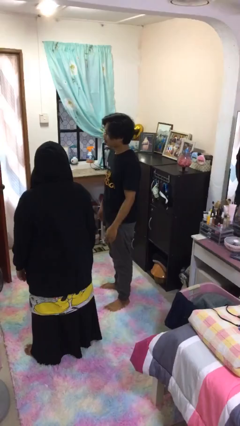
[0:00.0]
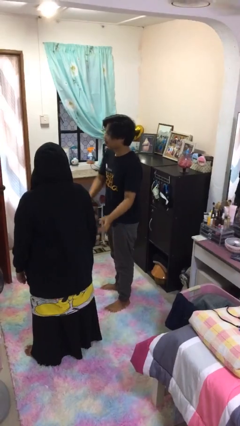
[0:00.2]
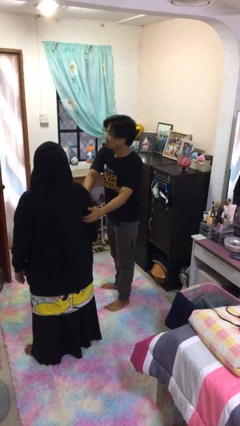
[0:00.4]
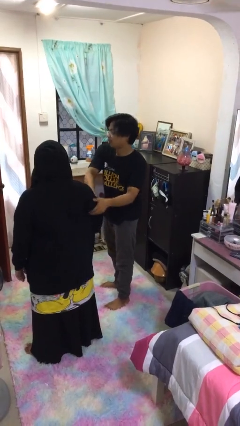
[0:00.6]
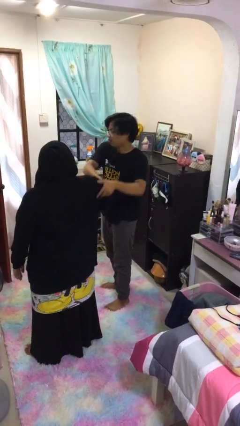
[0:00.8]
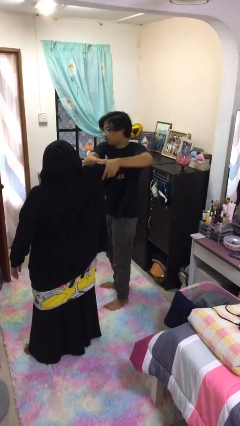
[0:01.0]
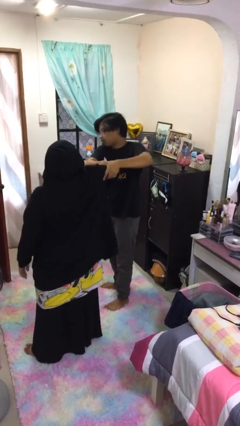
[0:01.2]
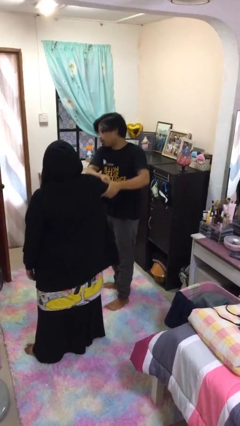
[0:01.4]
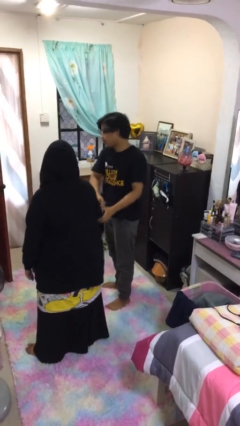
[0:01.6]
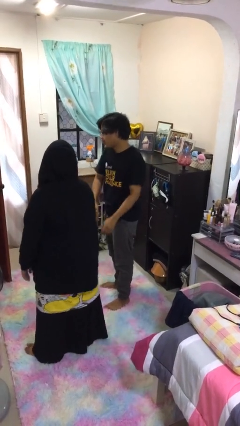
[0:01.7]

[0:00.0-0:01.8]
person grabs person by bicep

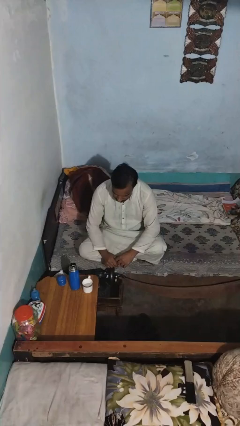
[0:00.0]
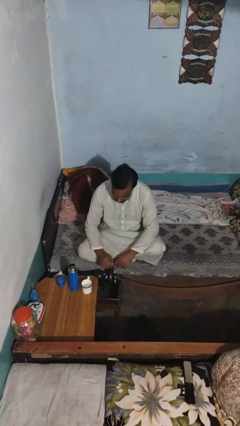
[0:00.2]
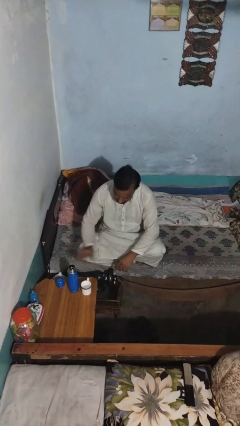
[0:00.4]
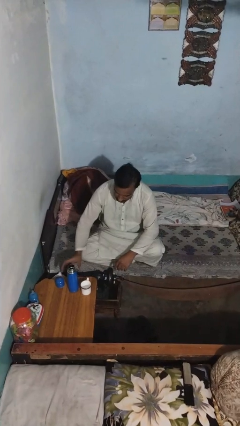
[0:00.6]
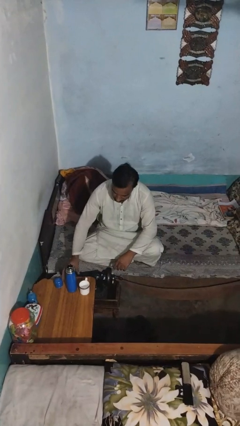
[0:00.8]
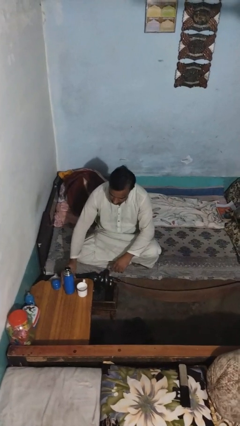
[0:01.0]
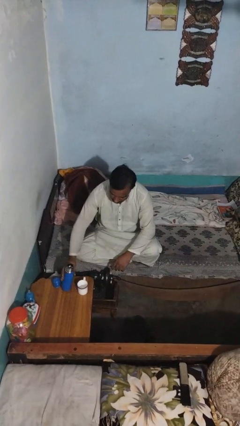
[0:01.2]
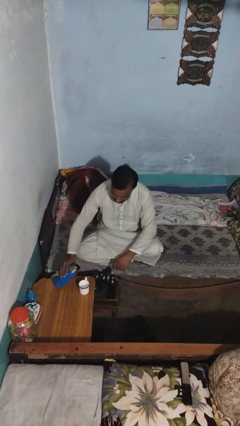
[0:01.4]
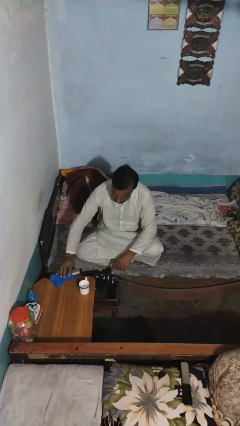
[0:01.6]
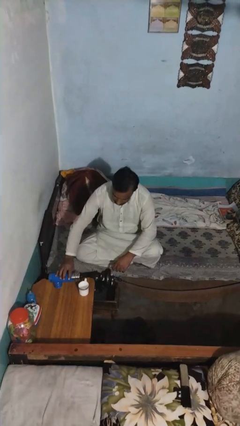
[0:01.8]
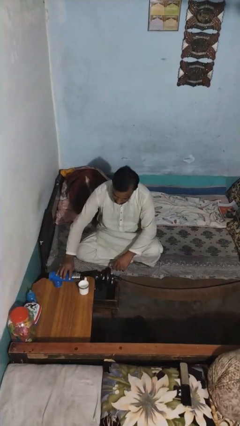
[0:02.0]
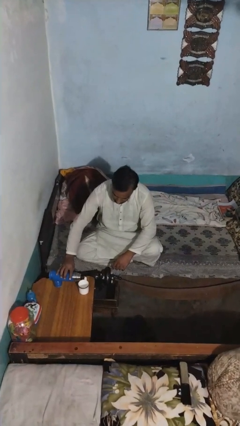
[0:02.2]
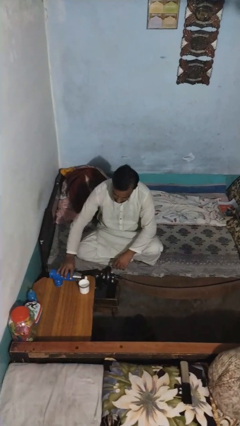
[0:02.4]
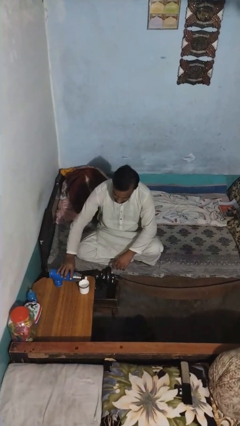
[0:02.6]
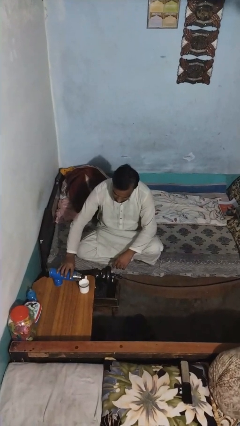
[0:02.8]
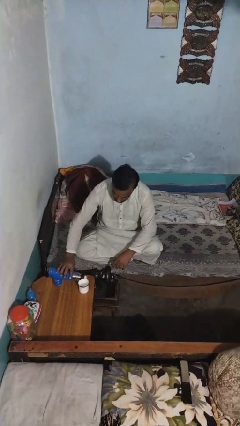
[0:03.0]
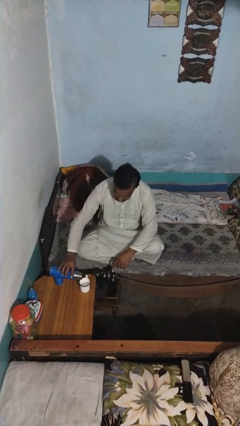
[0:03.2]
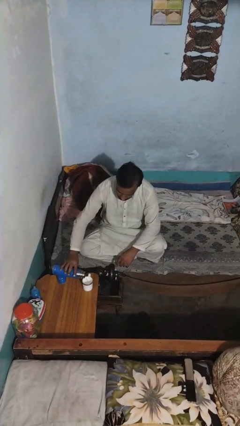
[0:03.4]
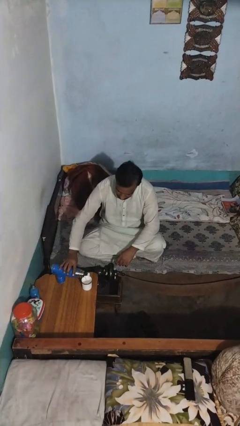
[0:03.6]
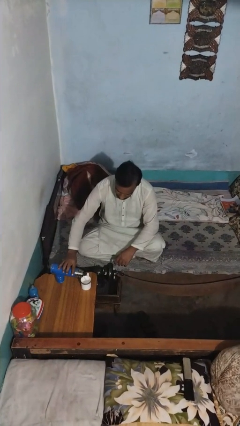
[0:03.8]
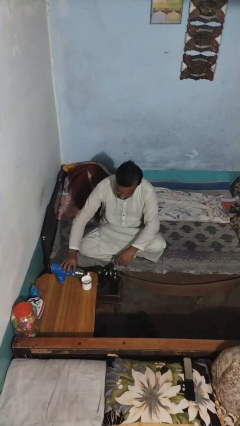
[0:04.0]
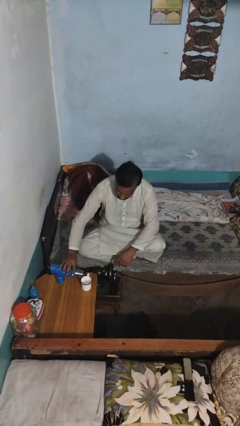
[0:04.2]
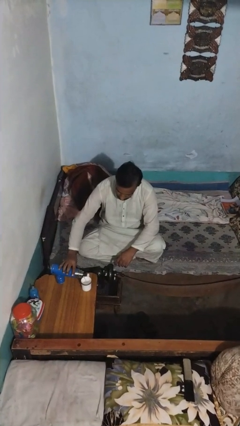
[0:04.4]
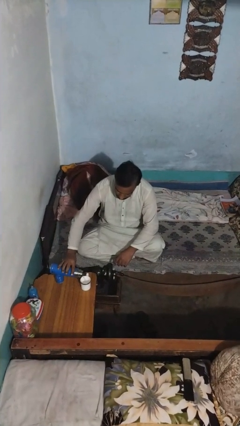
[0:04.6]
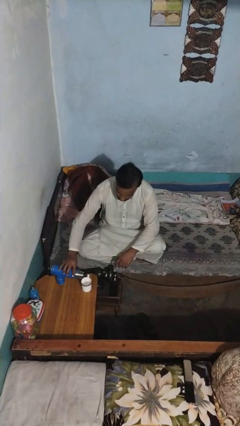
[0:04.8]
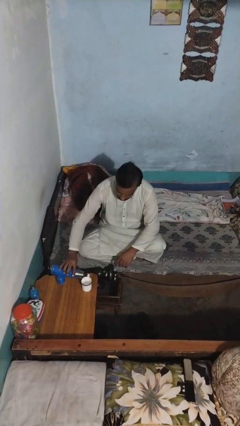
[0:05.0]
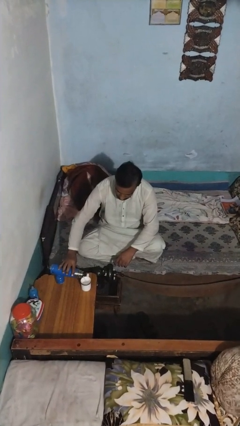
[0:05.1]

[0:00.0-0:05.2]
person pours liquid into cup

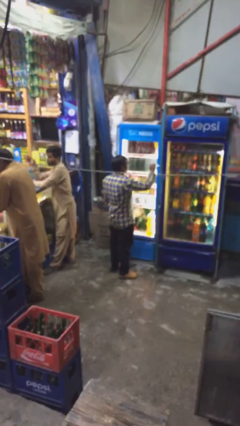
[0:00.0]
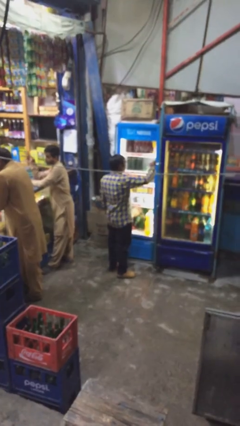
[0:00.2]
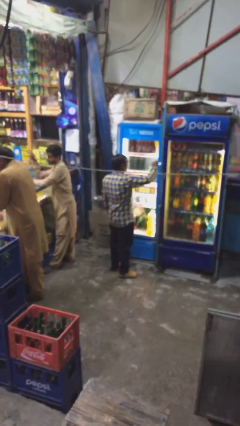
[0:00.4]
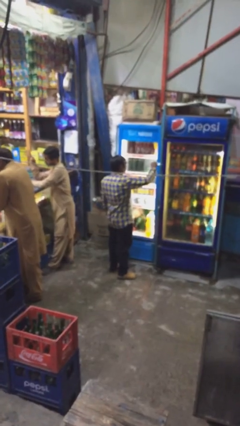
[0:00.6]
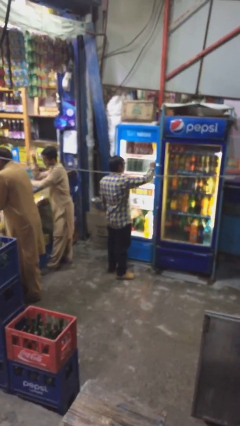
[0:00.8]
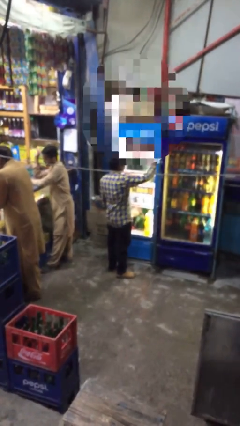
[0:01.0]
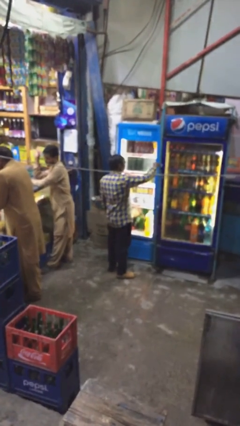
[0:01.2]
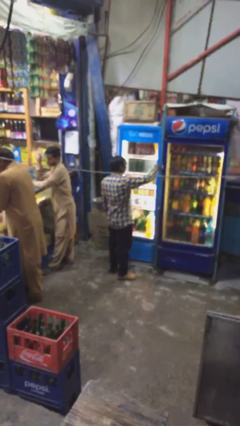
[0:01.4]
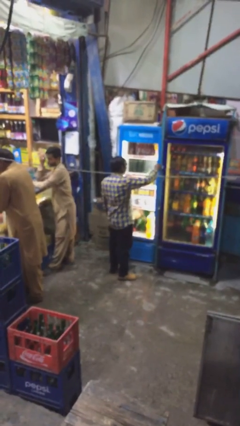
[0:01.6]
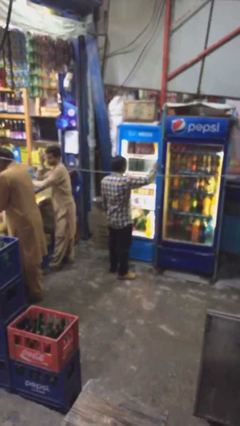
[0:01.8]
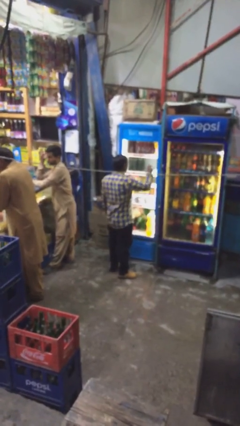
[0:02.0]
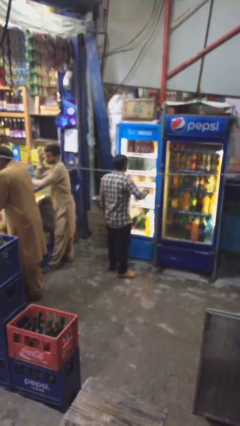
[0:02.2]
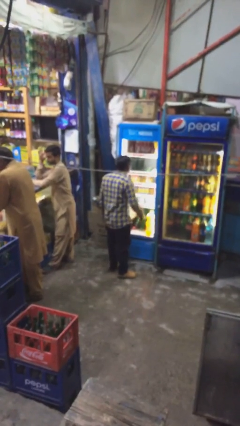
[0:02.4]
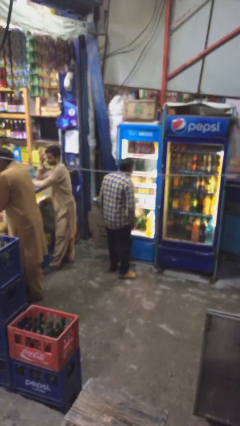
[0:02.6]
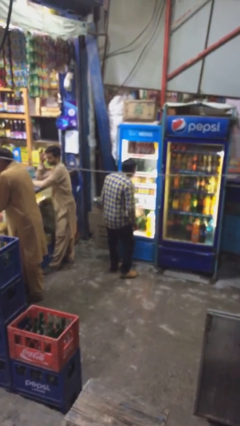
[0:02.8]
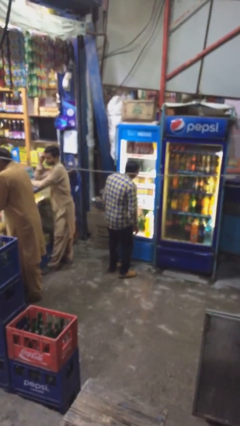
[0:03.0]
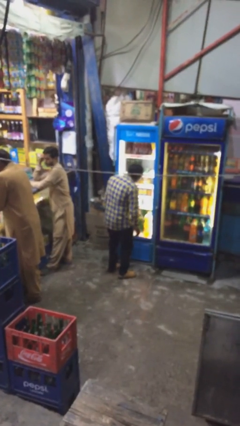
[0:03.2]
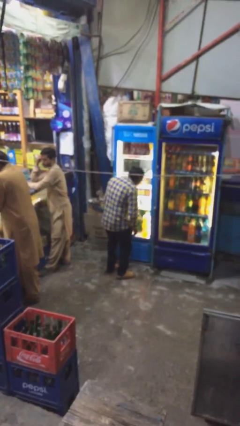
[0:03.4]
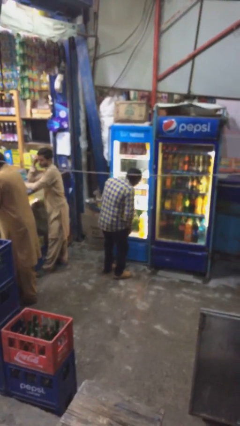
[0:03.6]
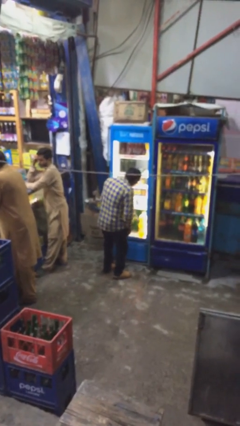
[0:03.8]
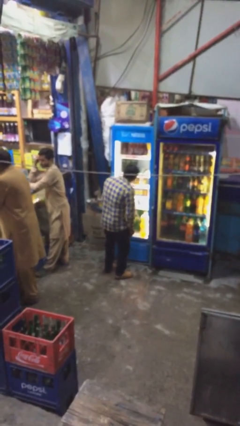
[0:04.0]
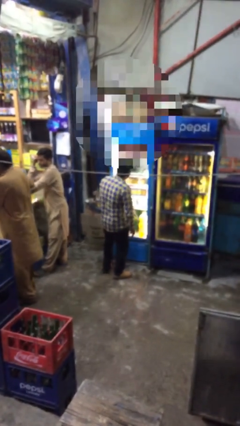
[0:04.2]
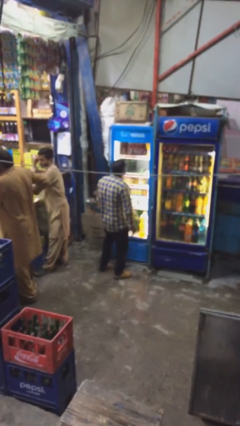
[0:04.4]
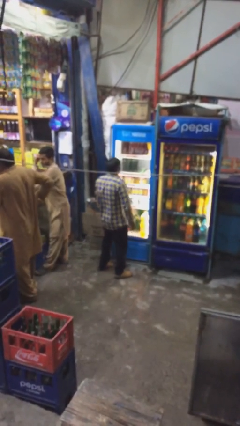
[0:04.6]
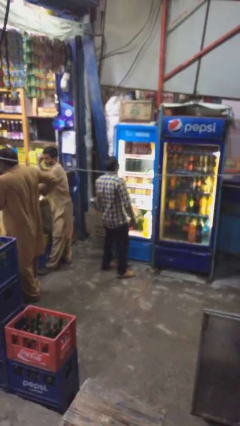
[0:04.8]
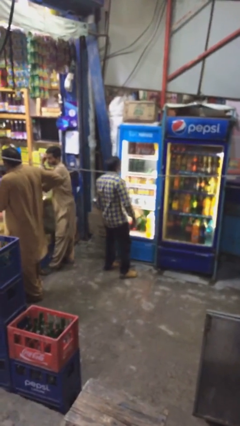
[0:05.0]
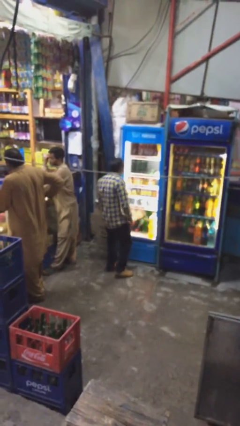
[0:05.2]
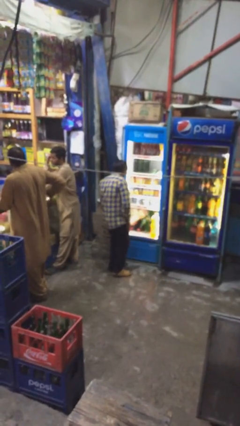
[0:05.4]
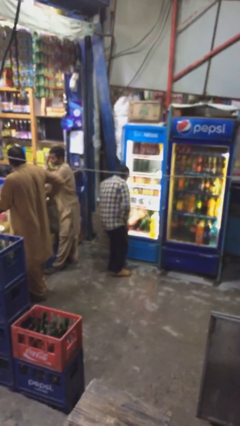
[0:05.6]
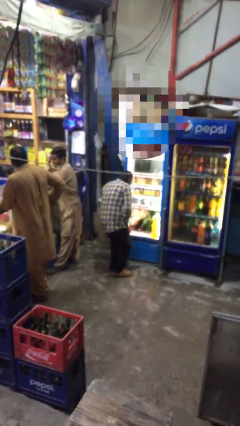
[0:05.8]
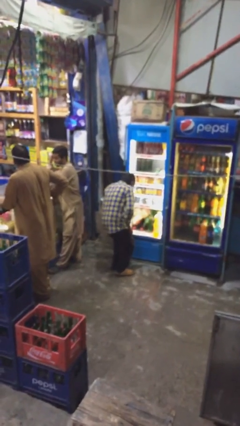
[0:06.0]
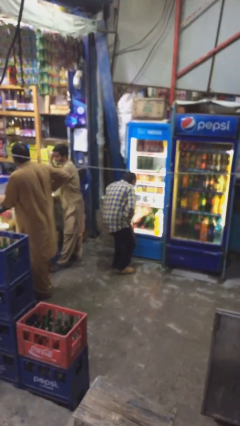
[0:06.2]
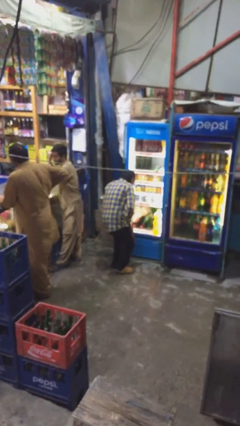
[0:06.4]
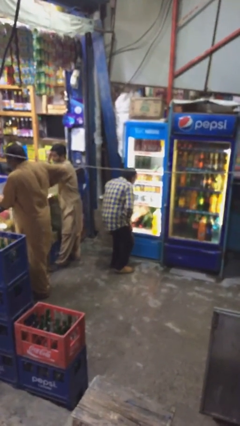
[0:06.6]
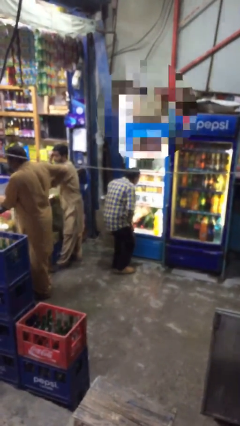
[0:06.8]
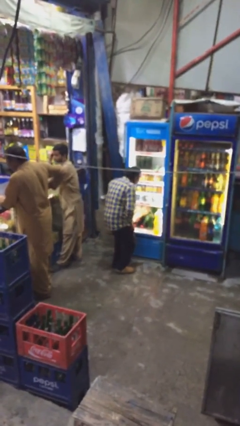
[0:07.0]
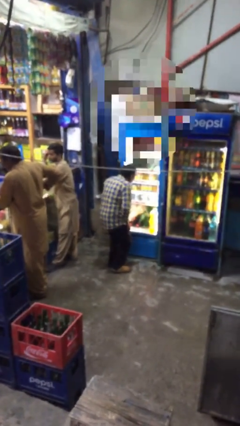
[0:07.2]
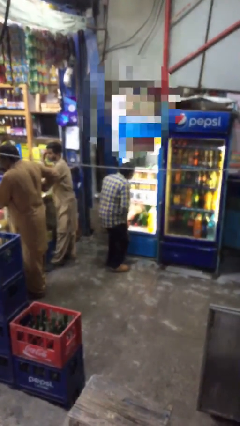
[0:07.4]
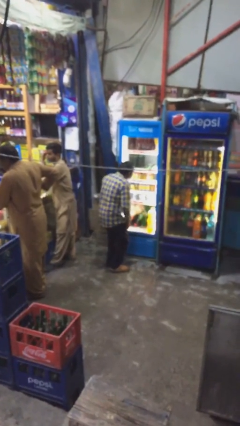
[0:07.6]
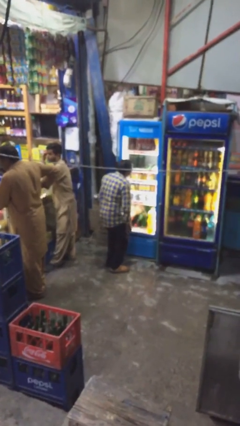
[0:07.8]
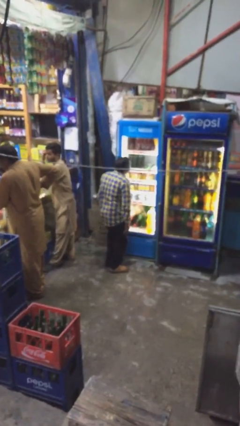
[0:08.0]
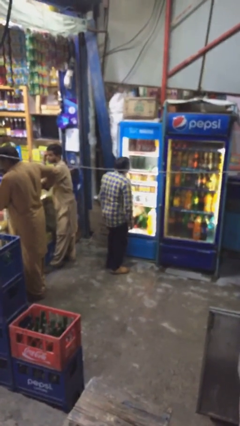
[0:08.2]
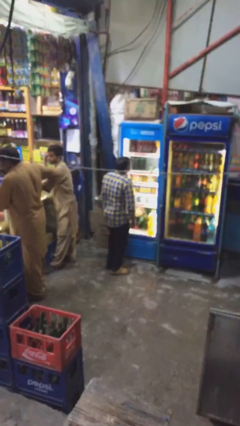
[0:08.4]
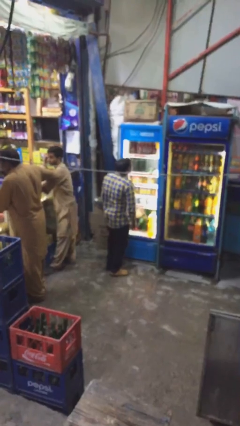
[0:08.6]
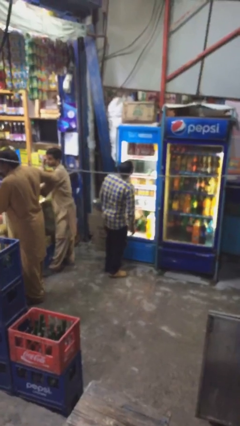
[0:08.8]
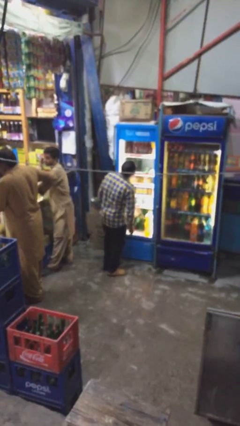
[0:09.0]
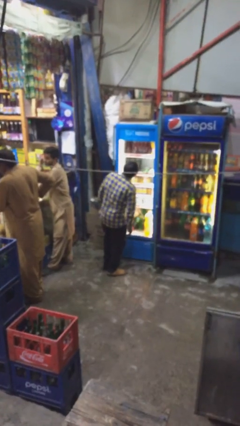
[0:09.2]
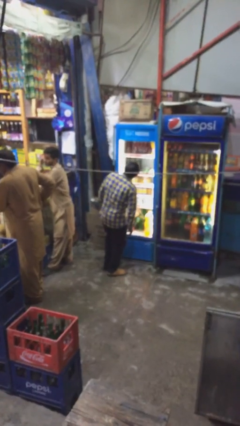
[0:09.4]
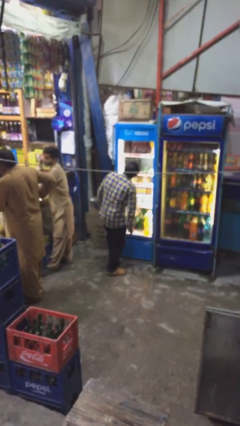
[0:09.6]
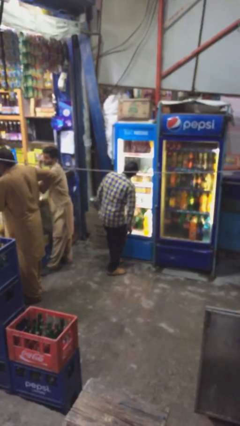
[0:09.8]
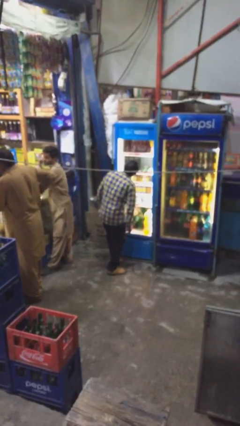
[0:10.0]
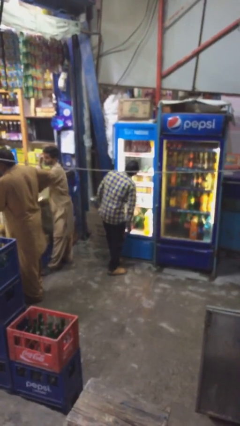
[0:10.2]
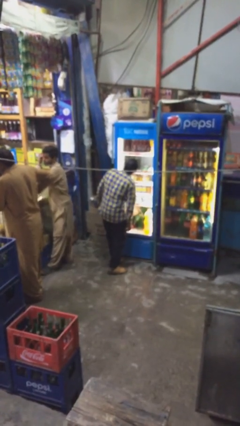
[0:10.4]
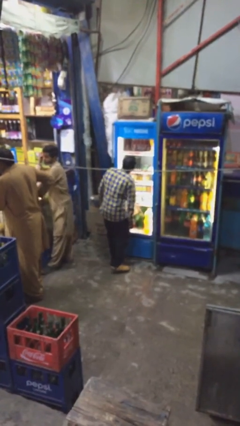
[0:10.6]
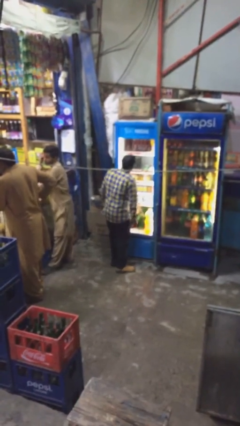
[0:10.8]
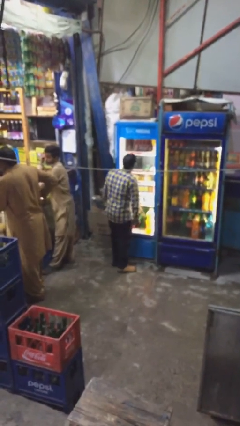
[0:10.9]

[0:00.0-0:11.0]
person purchases from machine
